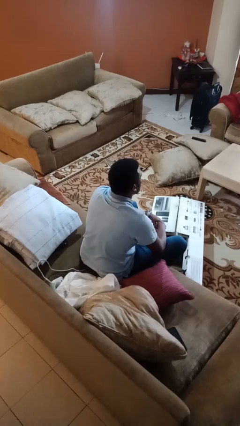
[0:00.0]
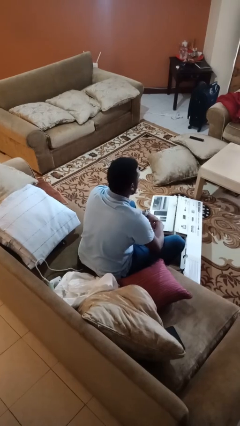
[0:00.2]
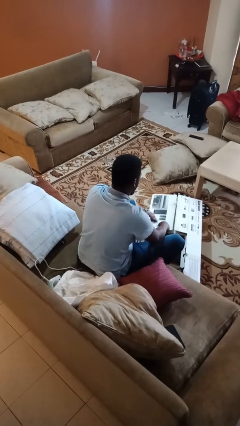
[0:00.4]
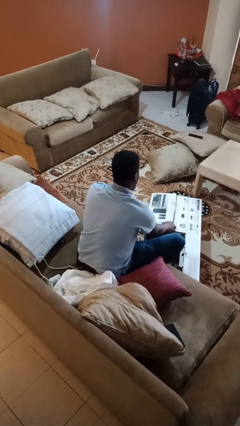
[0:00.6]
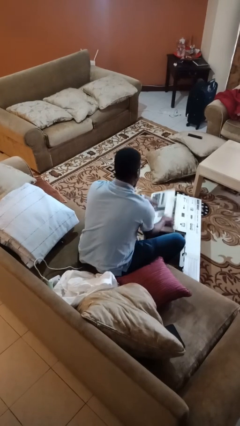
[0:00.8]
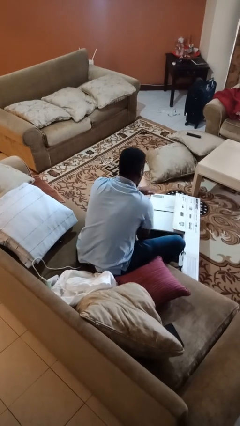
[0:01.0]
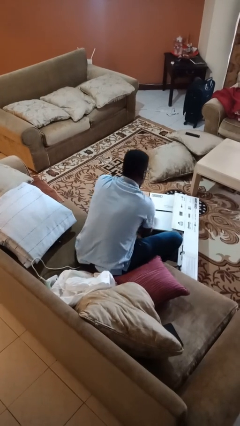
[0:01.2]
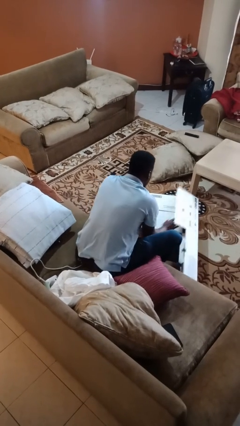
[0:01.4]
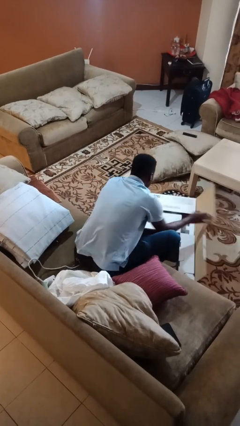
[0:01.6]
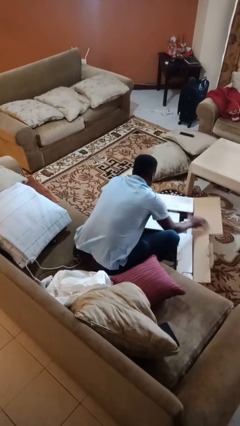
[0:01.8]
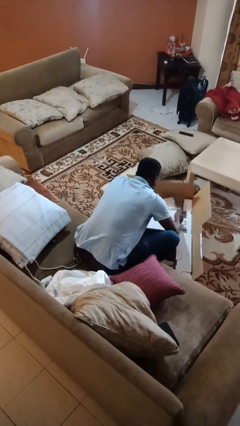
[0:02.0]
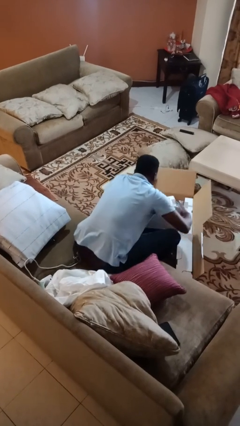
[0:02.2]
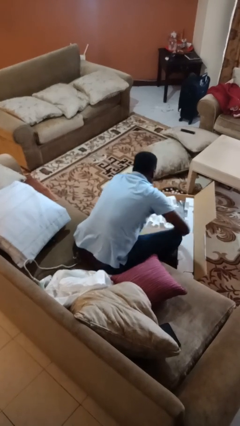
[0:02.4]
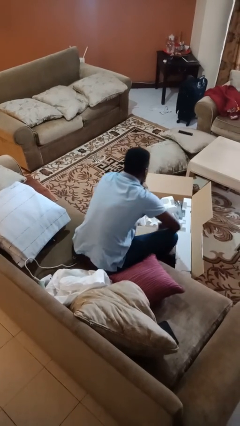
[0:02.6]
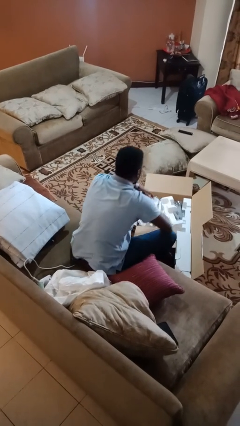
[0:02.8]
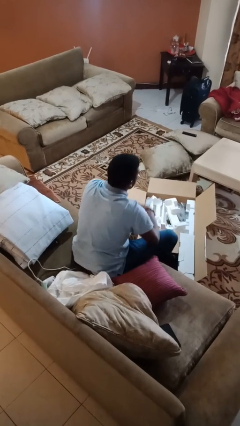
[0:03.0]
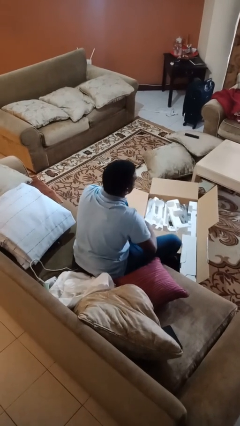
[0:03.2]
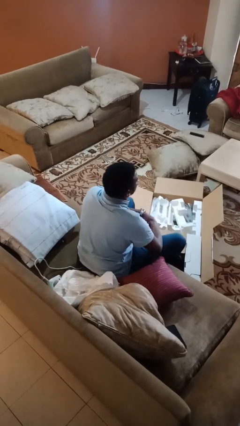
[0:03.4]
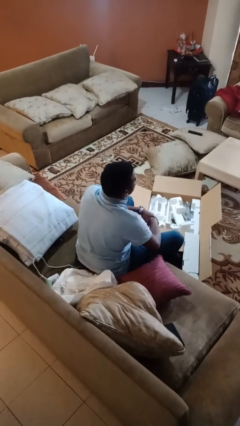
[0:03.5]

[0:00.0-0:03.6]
person opens box

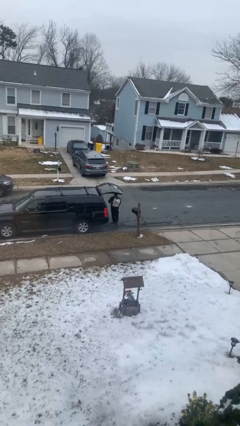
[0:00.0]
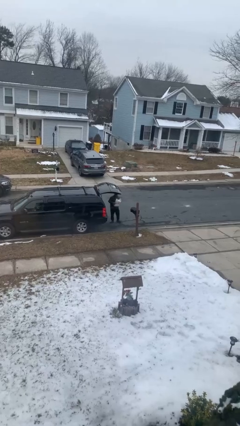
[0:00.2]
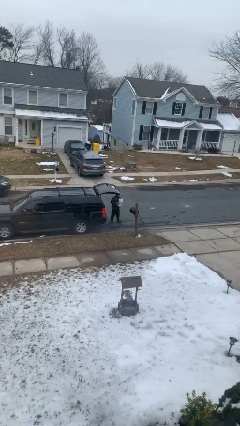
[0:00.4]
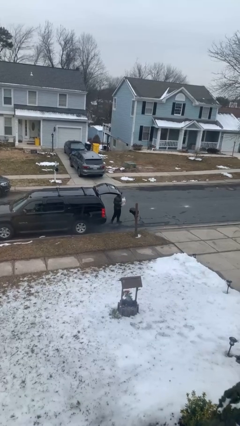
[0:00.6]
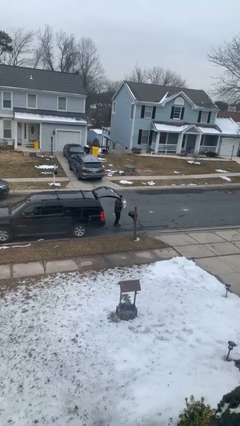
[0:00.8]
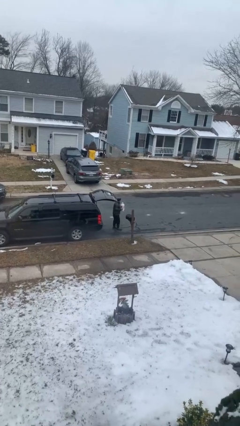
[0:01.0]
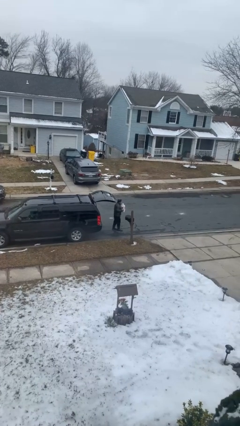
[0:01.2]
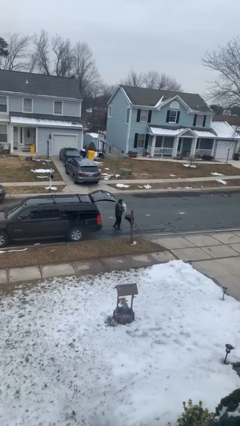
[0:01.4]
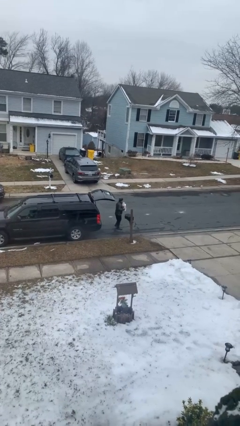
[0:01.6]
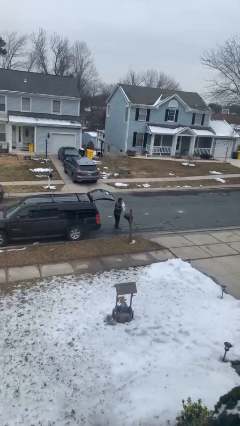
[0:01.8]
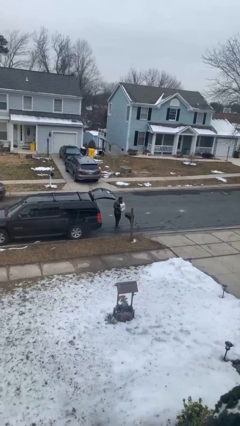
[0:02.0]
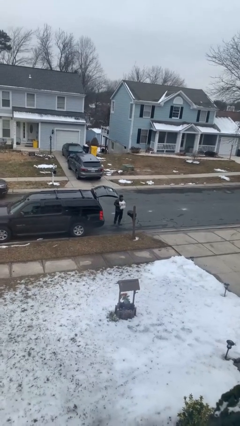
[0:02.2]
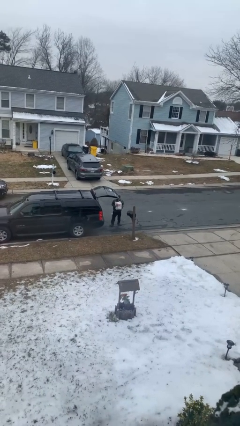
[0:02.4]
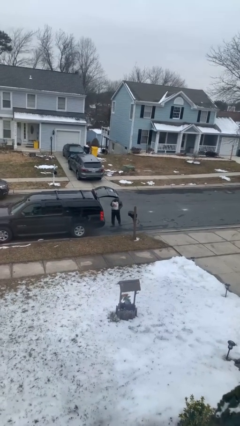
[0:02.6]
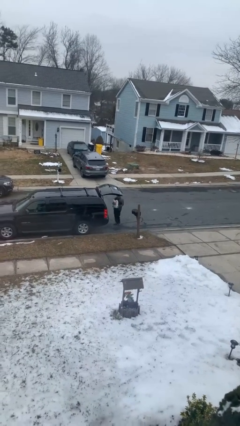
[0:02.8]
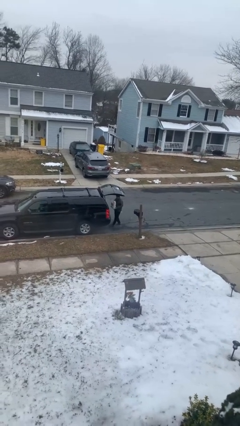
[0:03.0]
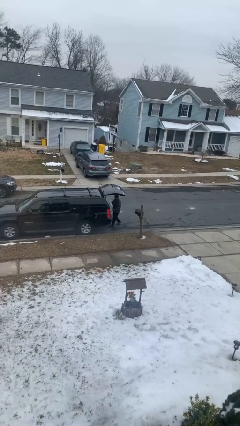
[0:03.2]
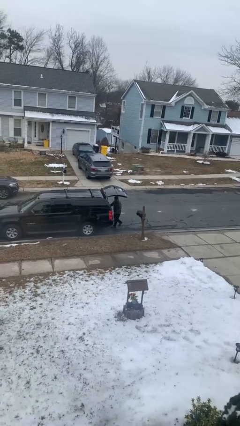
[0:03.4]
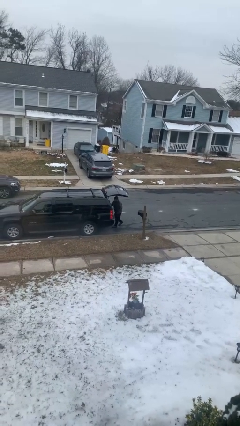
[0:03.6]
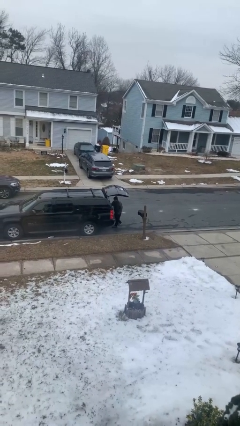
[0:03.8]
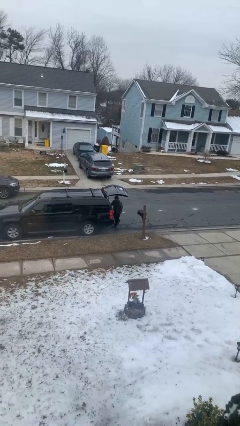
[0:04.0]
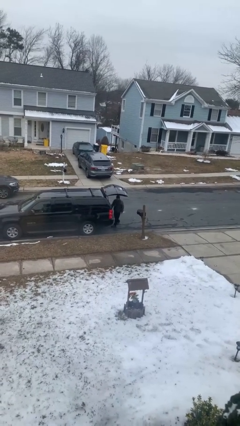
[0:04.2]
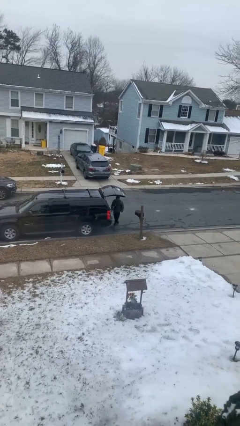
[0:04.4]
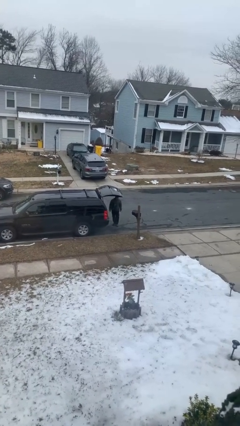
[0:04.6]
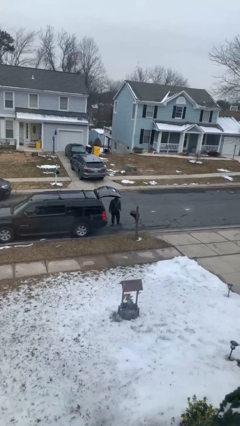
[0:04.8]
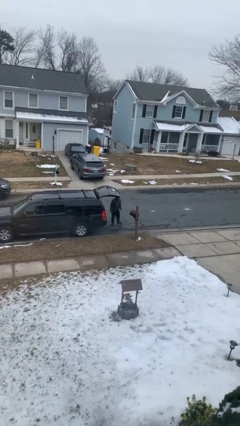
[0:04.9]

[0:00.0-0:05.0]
person loads car

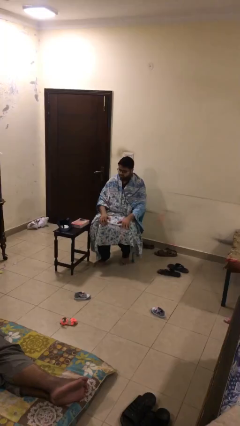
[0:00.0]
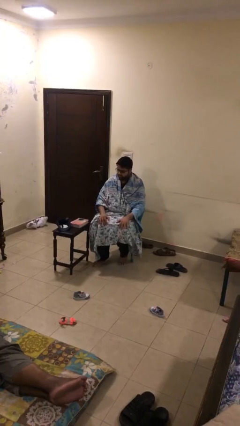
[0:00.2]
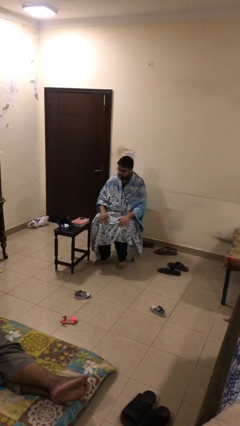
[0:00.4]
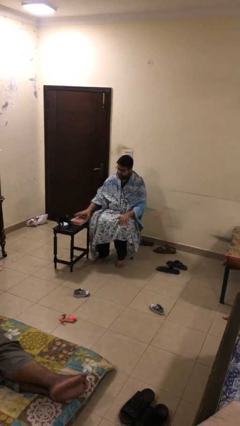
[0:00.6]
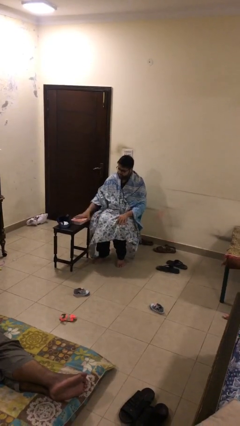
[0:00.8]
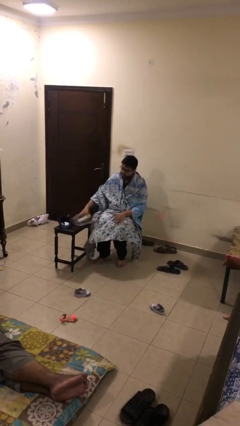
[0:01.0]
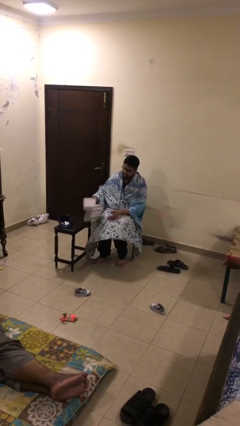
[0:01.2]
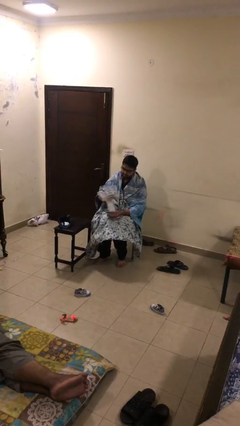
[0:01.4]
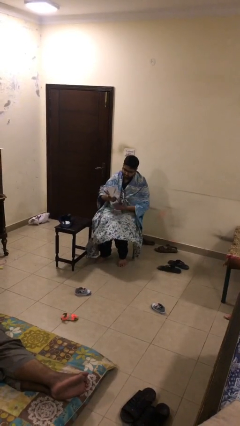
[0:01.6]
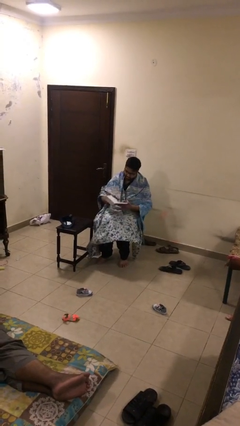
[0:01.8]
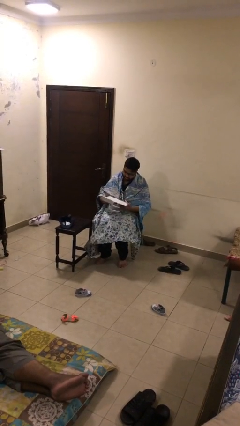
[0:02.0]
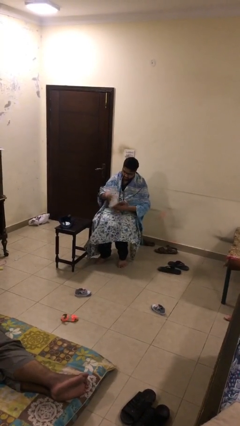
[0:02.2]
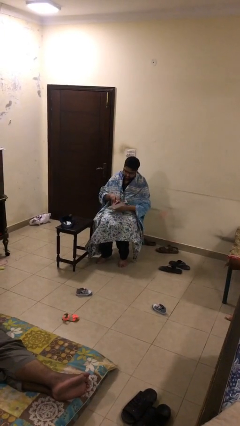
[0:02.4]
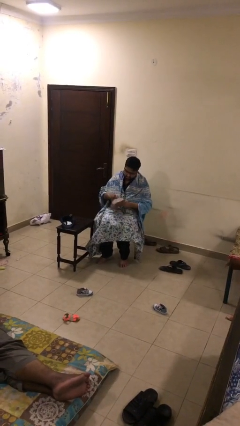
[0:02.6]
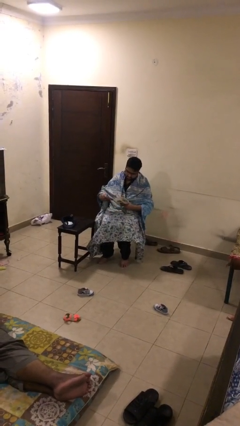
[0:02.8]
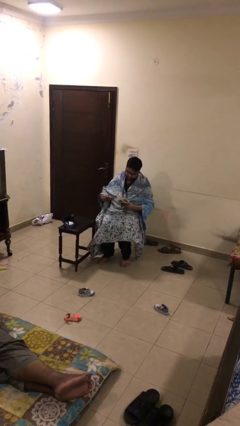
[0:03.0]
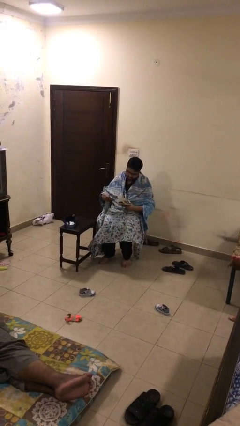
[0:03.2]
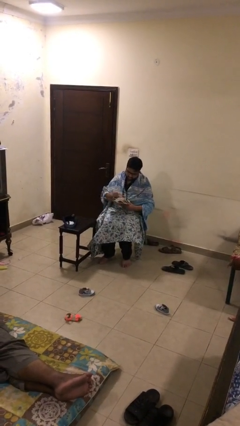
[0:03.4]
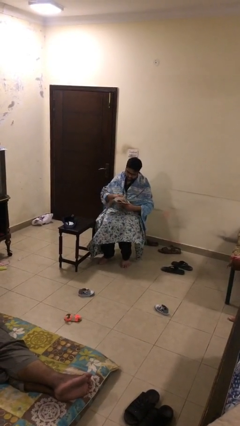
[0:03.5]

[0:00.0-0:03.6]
person reads document

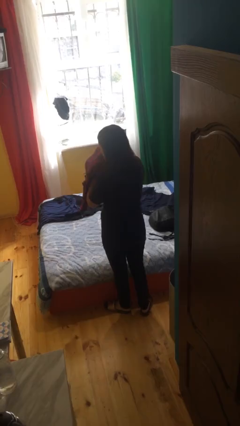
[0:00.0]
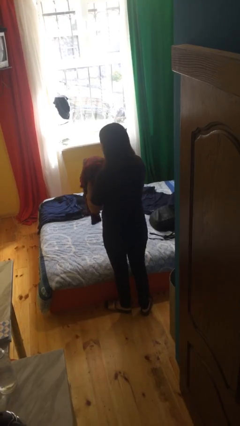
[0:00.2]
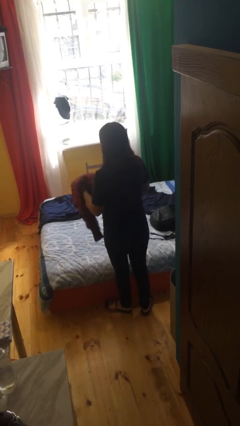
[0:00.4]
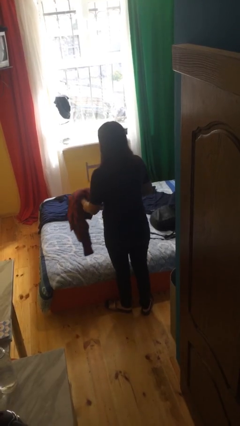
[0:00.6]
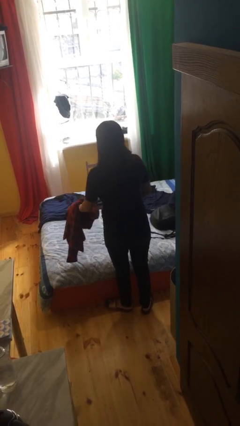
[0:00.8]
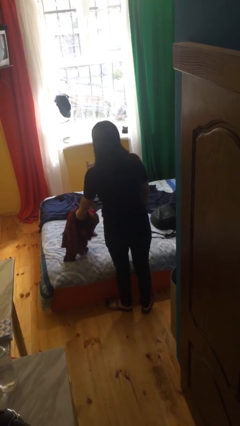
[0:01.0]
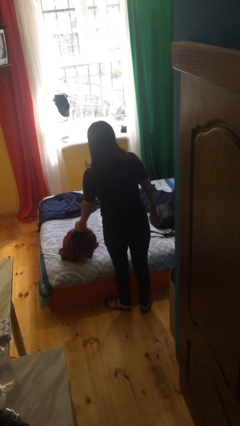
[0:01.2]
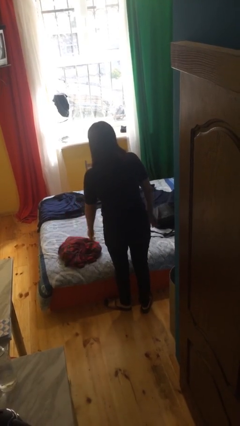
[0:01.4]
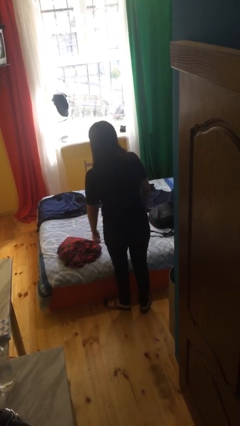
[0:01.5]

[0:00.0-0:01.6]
person puts down object on bed

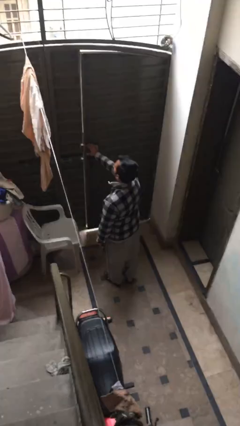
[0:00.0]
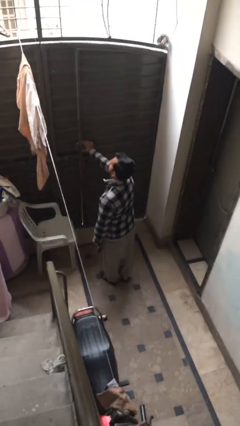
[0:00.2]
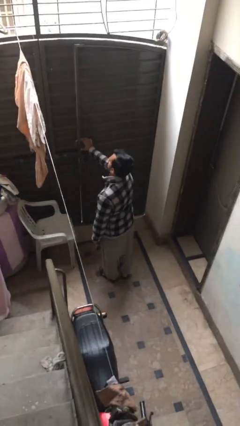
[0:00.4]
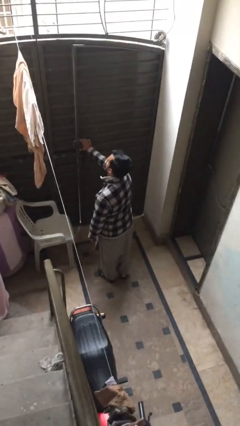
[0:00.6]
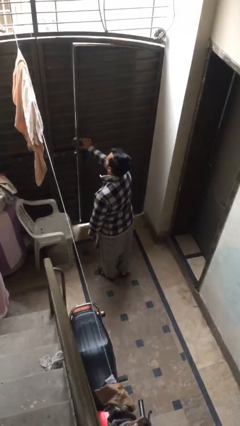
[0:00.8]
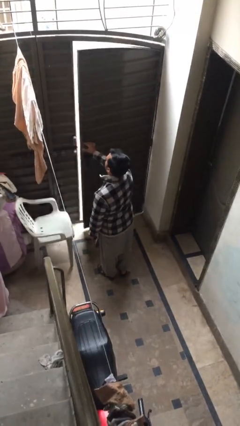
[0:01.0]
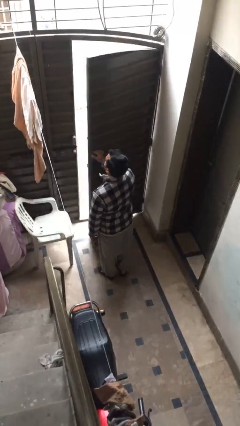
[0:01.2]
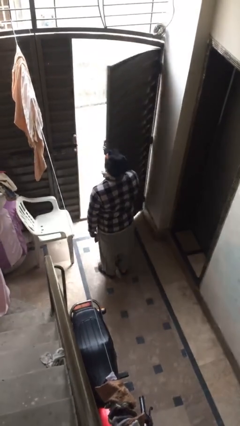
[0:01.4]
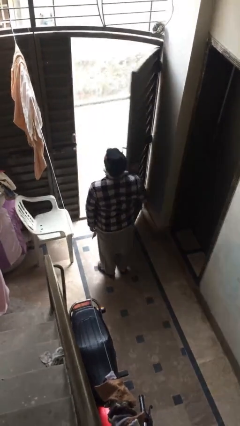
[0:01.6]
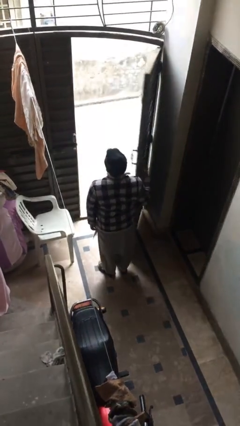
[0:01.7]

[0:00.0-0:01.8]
person opens facility door

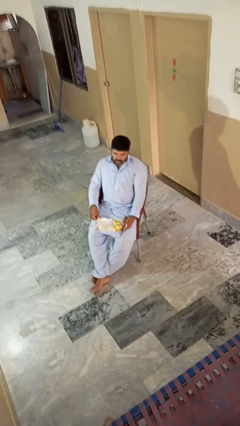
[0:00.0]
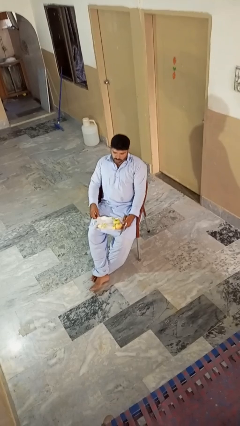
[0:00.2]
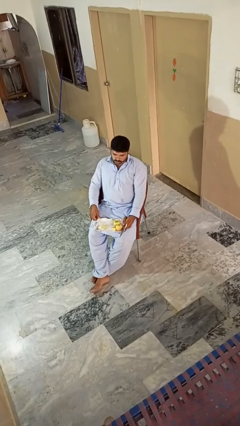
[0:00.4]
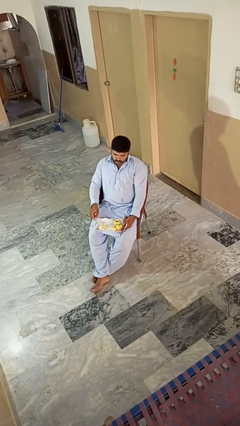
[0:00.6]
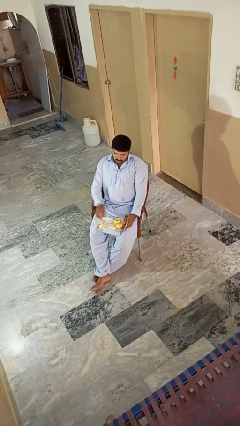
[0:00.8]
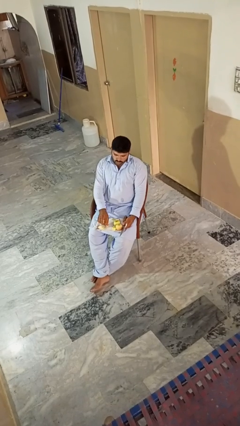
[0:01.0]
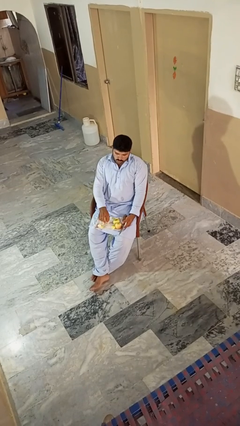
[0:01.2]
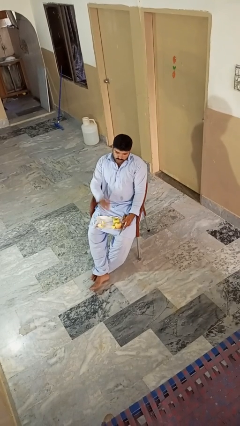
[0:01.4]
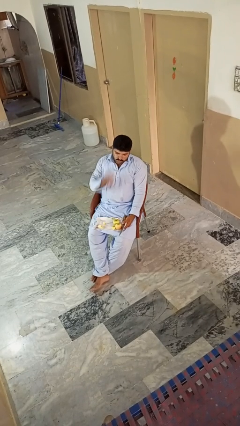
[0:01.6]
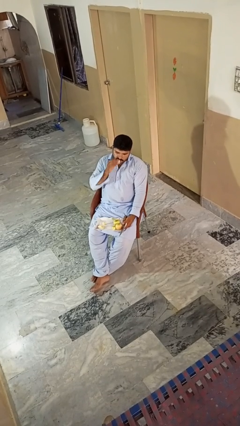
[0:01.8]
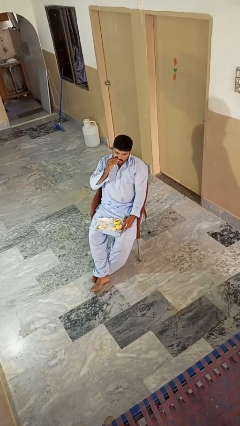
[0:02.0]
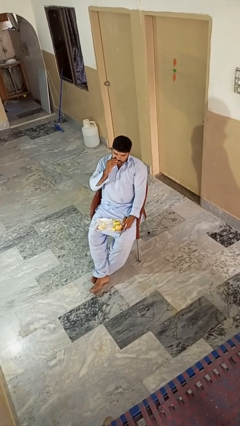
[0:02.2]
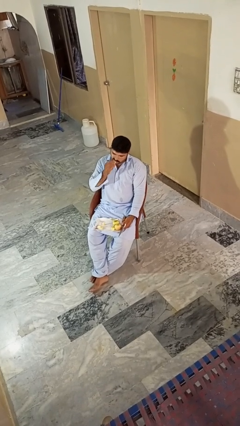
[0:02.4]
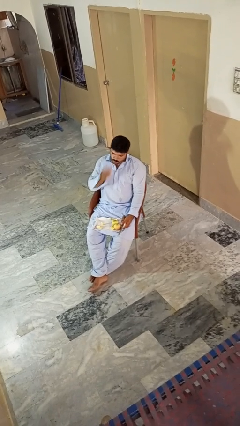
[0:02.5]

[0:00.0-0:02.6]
person eats apple
